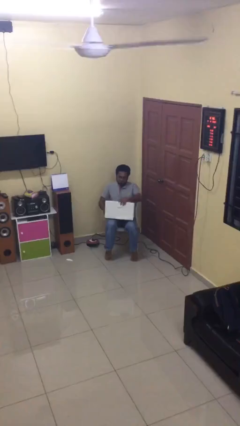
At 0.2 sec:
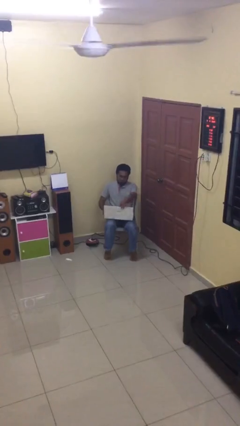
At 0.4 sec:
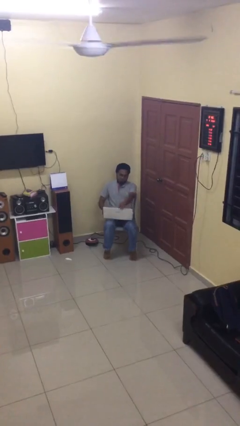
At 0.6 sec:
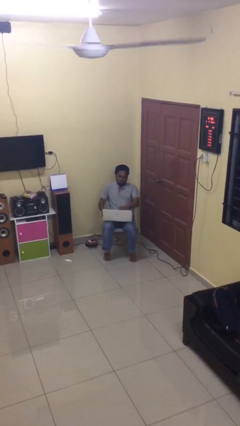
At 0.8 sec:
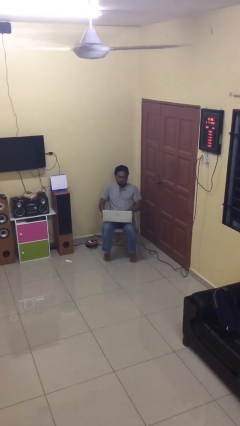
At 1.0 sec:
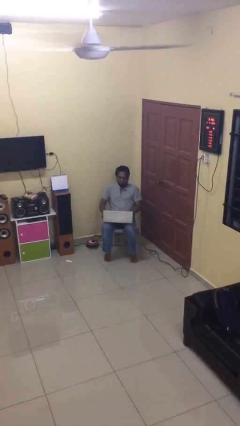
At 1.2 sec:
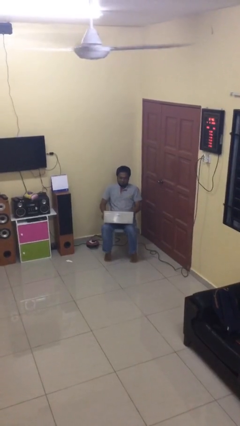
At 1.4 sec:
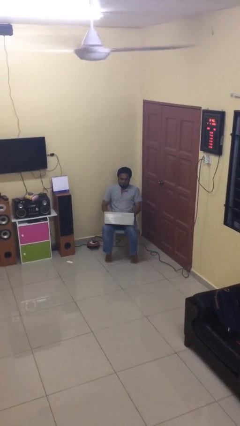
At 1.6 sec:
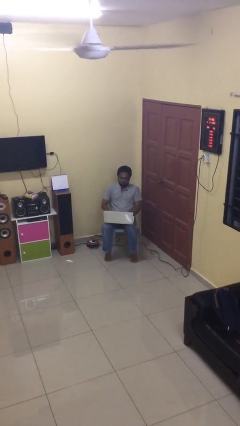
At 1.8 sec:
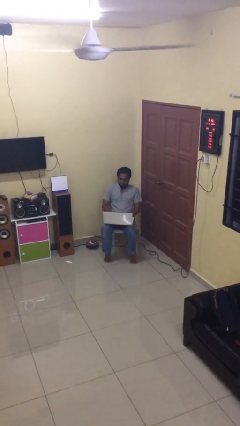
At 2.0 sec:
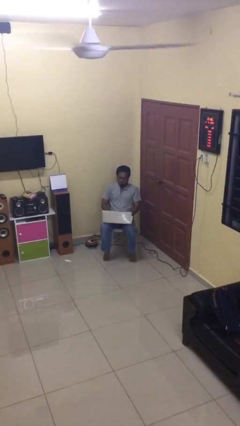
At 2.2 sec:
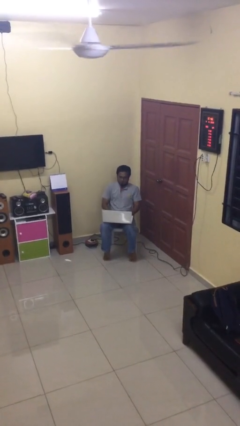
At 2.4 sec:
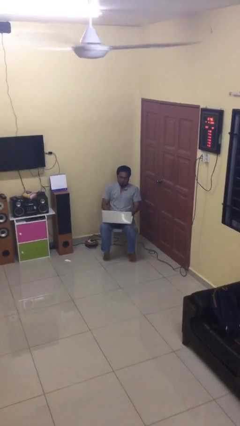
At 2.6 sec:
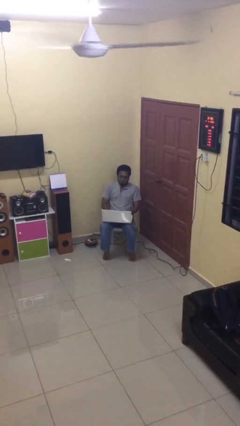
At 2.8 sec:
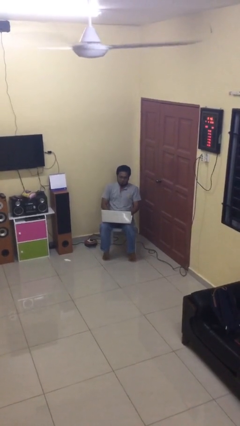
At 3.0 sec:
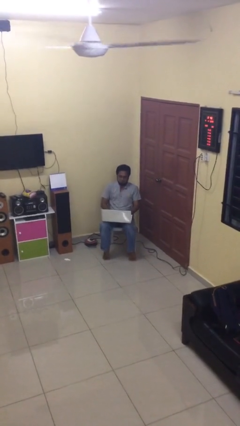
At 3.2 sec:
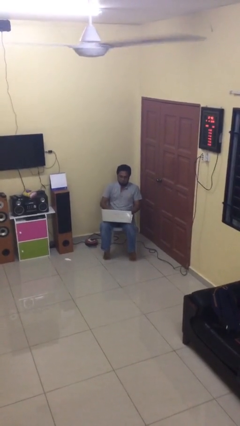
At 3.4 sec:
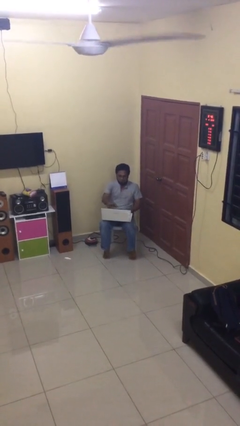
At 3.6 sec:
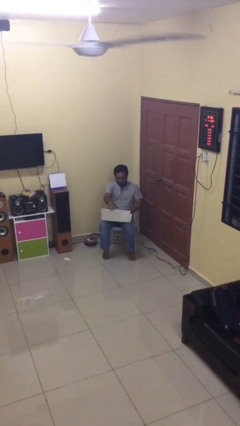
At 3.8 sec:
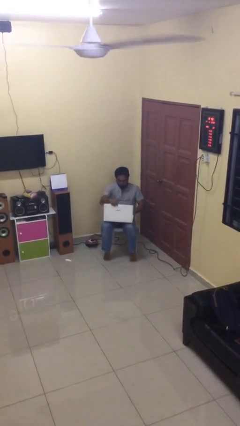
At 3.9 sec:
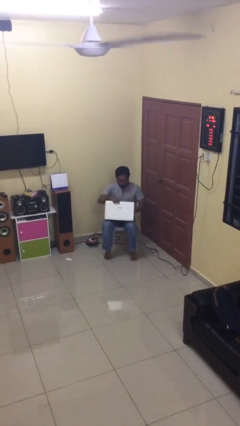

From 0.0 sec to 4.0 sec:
person interacts with laptop

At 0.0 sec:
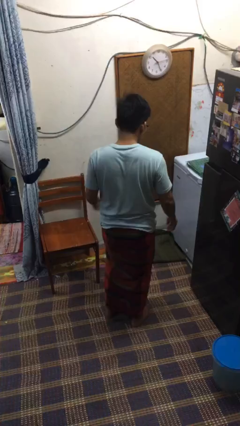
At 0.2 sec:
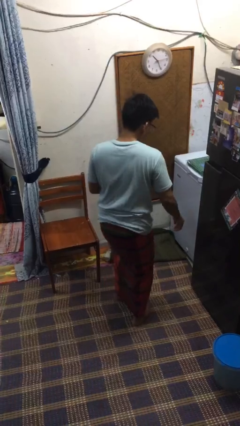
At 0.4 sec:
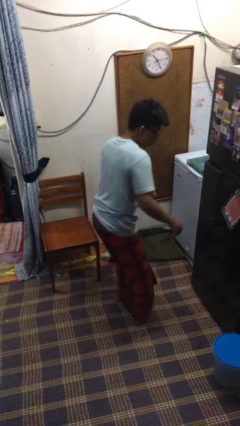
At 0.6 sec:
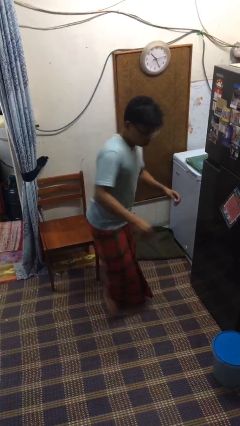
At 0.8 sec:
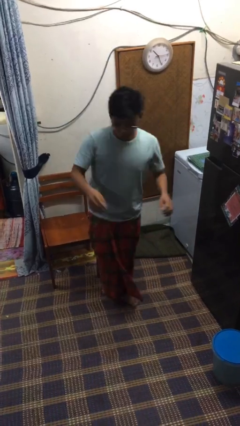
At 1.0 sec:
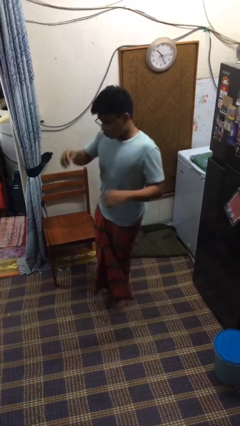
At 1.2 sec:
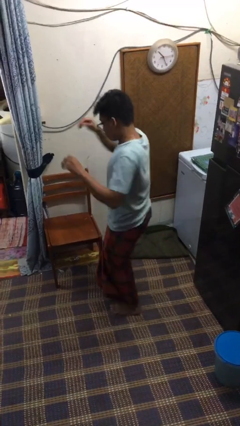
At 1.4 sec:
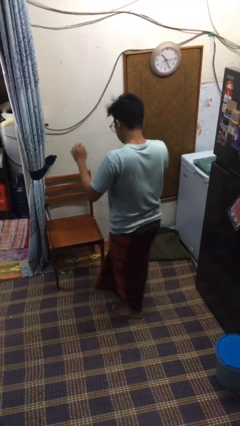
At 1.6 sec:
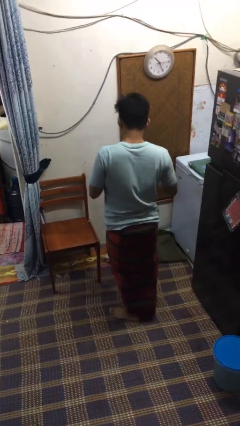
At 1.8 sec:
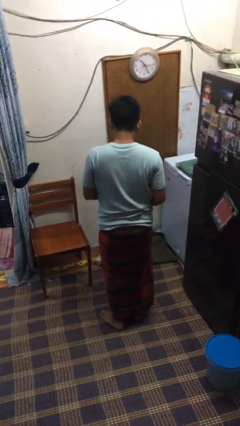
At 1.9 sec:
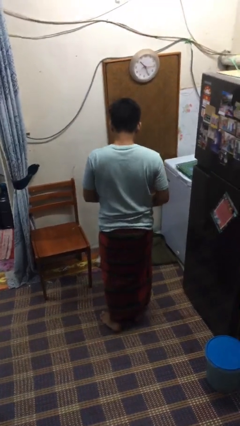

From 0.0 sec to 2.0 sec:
person twirls

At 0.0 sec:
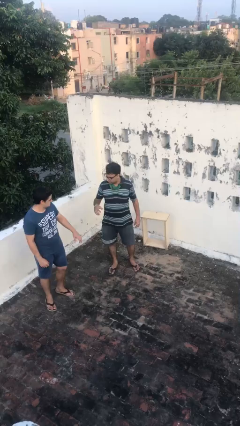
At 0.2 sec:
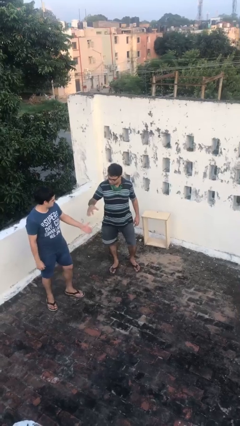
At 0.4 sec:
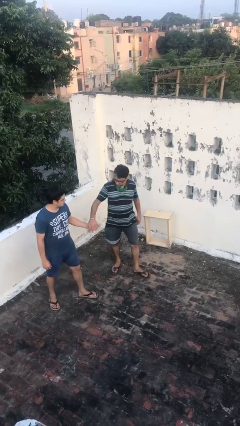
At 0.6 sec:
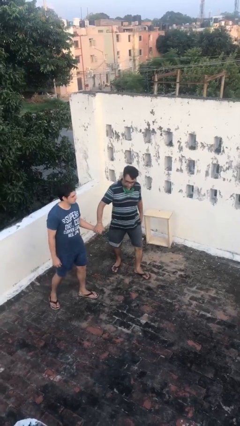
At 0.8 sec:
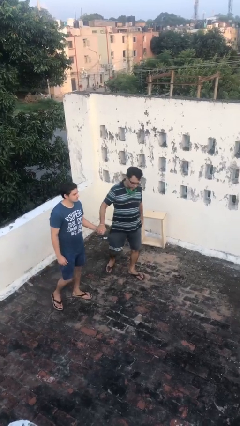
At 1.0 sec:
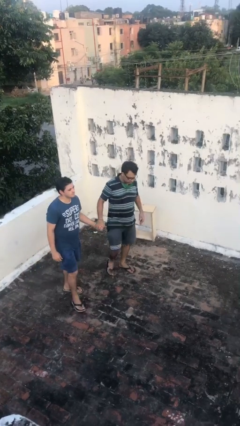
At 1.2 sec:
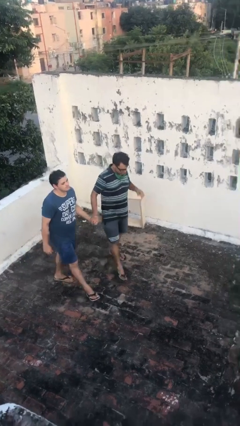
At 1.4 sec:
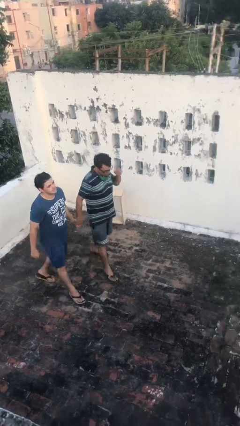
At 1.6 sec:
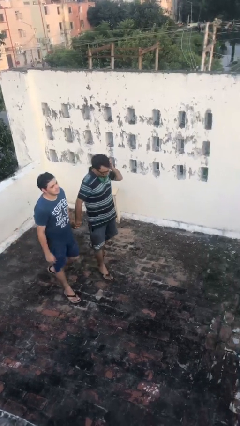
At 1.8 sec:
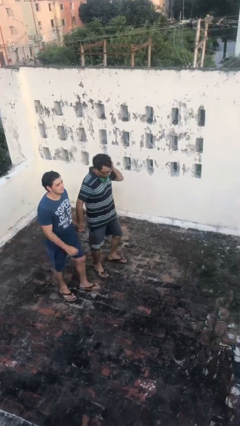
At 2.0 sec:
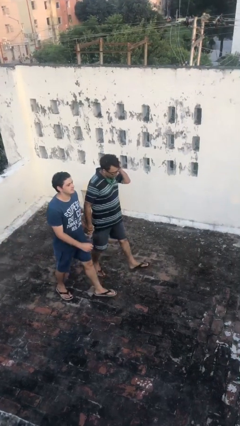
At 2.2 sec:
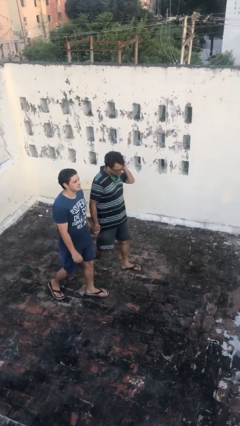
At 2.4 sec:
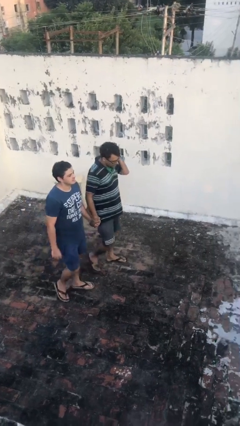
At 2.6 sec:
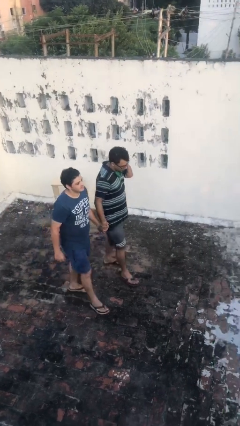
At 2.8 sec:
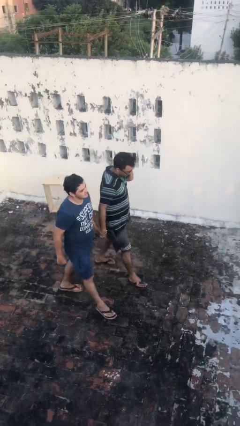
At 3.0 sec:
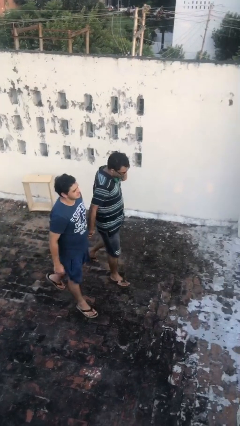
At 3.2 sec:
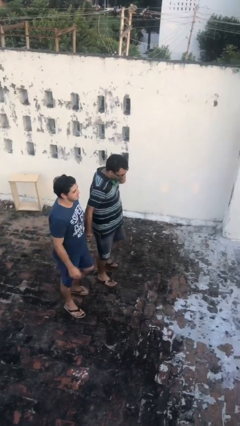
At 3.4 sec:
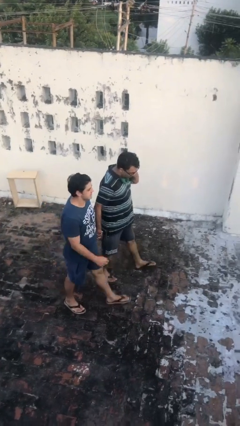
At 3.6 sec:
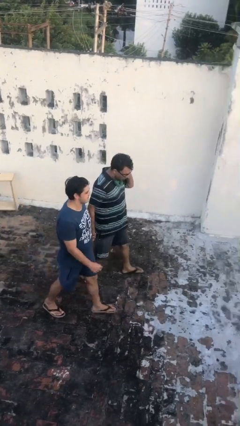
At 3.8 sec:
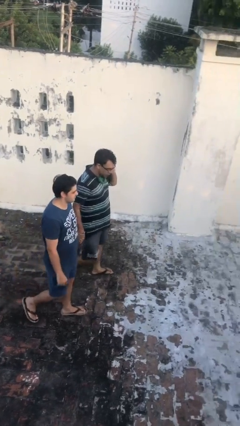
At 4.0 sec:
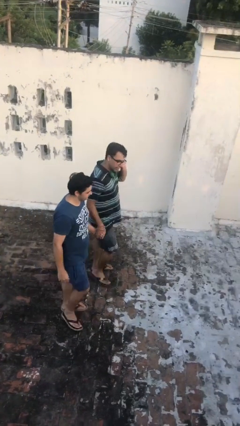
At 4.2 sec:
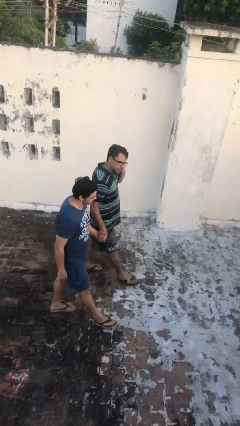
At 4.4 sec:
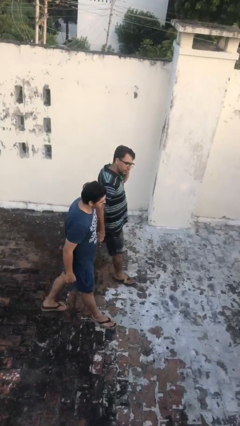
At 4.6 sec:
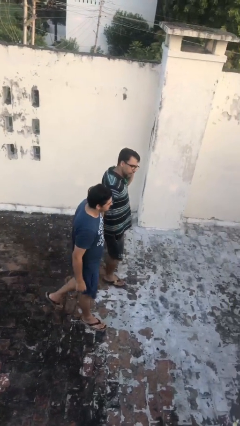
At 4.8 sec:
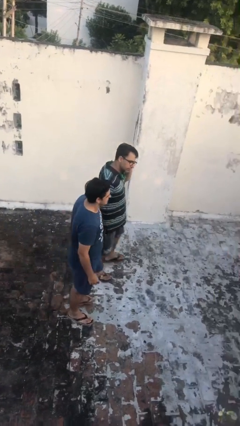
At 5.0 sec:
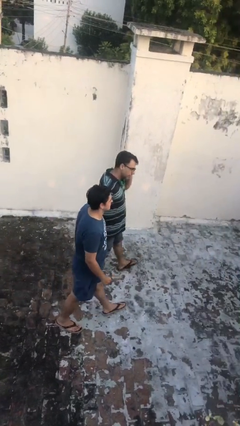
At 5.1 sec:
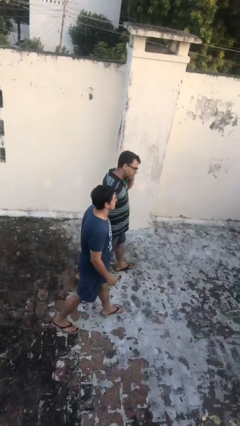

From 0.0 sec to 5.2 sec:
person holds hand

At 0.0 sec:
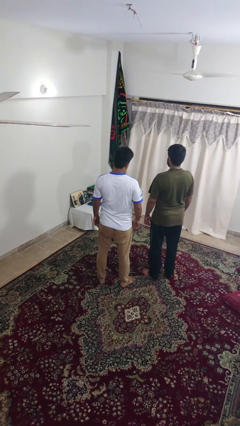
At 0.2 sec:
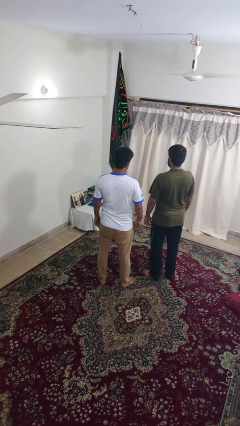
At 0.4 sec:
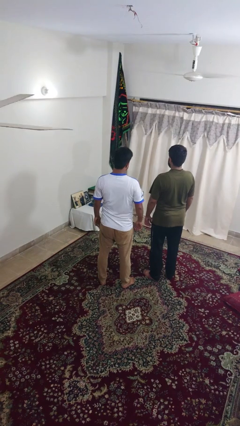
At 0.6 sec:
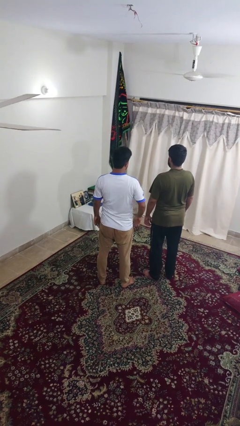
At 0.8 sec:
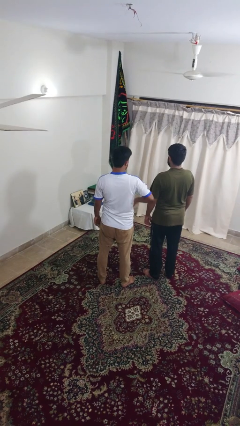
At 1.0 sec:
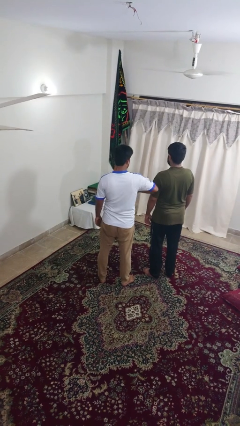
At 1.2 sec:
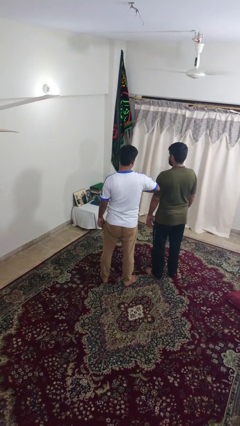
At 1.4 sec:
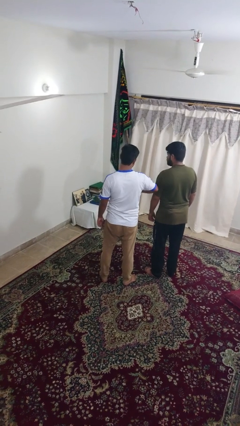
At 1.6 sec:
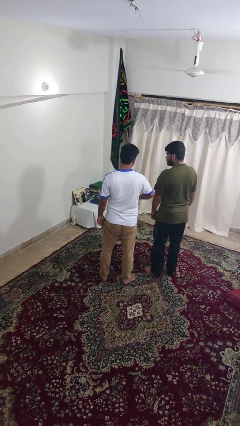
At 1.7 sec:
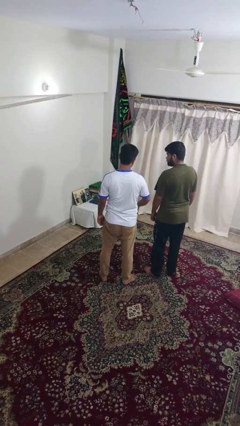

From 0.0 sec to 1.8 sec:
person nudges person with elbow

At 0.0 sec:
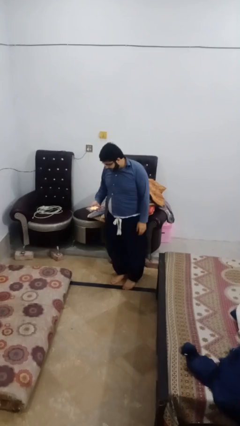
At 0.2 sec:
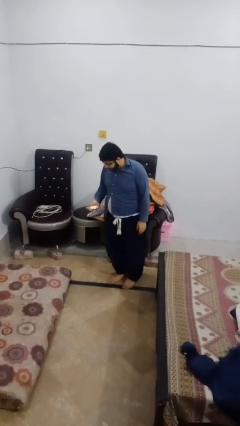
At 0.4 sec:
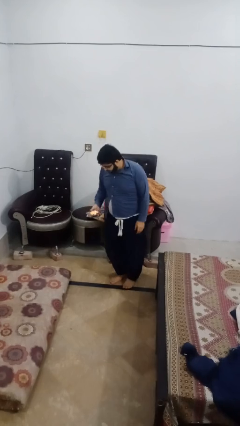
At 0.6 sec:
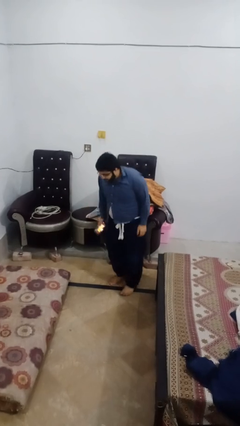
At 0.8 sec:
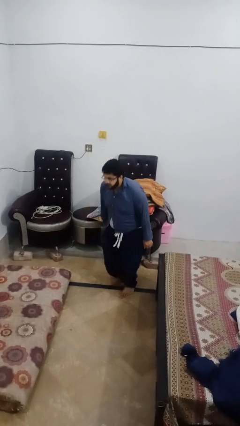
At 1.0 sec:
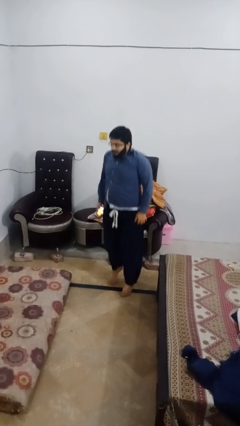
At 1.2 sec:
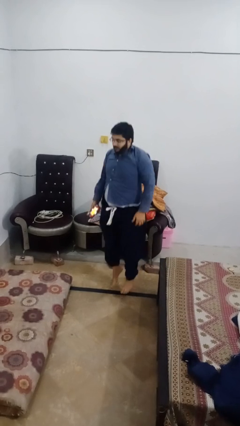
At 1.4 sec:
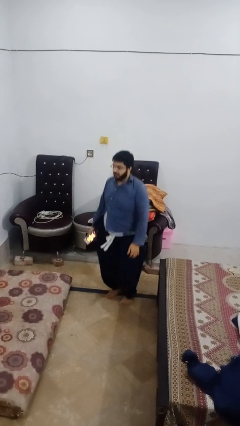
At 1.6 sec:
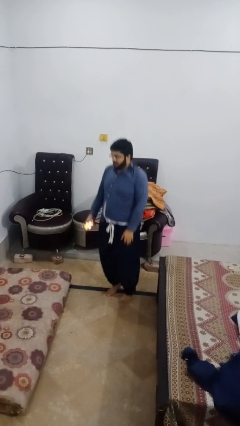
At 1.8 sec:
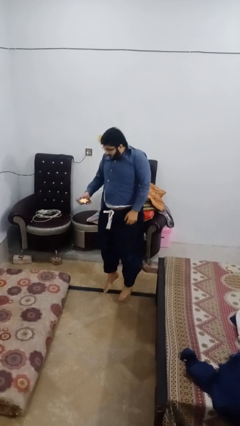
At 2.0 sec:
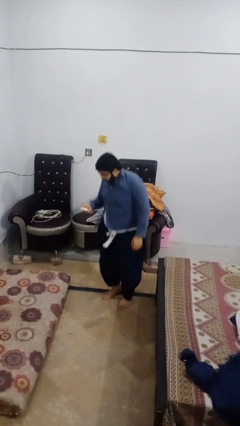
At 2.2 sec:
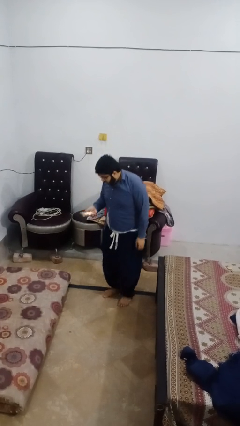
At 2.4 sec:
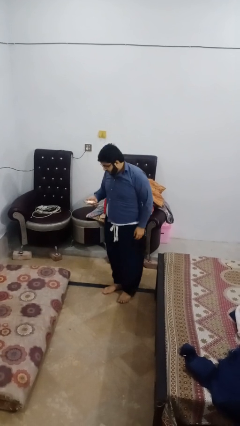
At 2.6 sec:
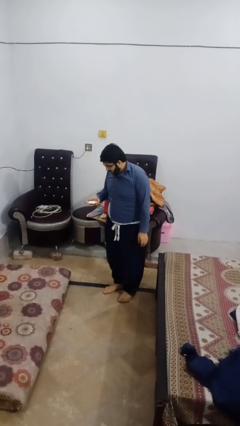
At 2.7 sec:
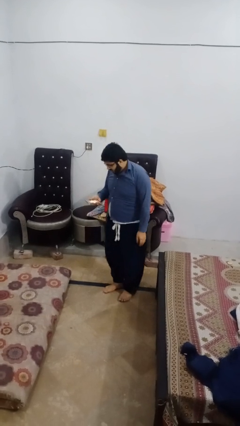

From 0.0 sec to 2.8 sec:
person jumps

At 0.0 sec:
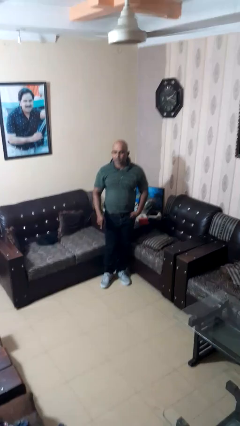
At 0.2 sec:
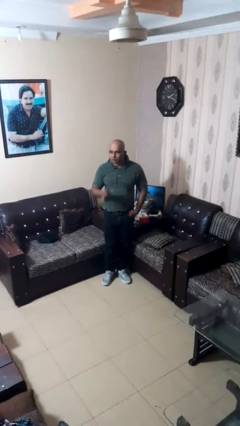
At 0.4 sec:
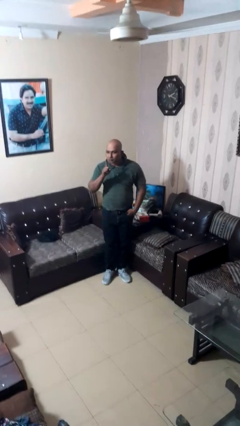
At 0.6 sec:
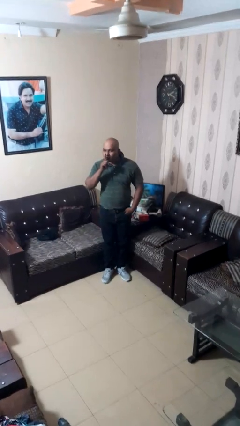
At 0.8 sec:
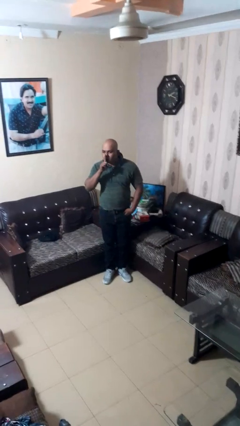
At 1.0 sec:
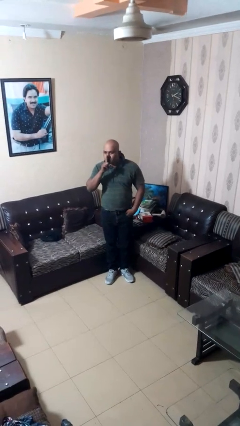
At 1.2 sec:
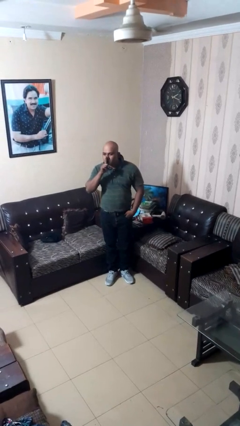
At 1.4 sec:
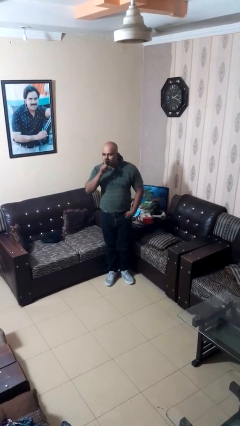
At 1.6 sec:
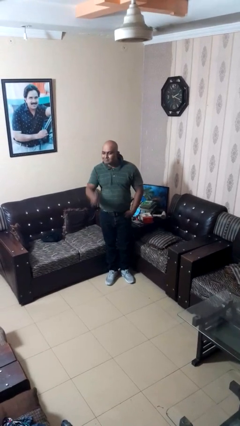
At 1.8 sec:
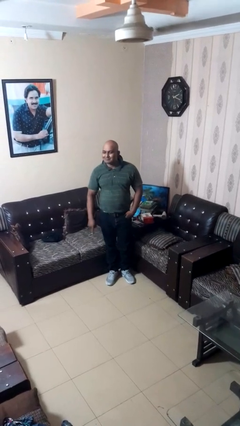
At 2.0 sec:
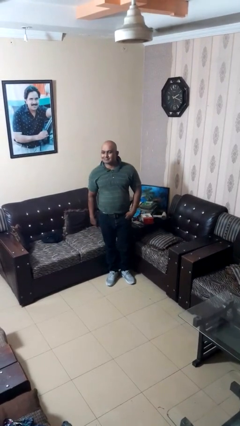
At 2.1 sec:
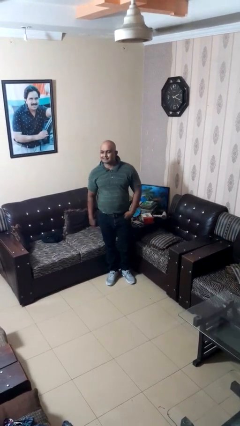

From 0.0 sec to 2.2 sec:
person gestures be quiet
